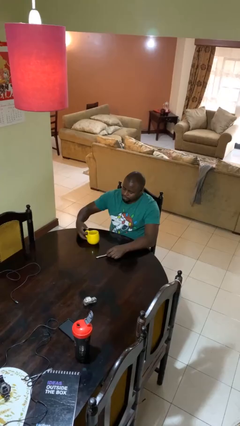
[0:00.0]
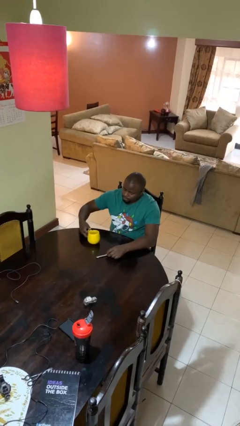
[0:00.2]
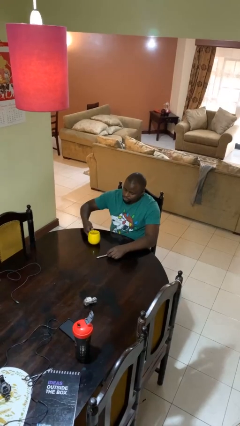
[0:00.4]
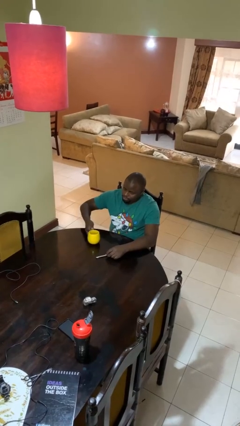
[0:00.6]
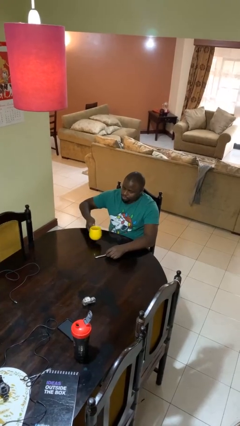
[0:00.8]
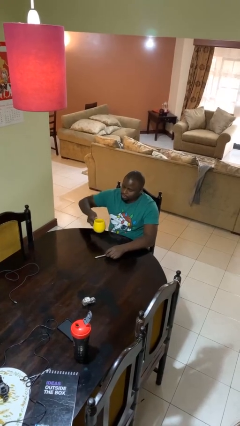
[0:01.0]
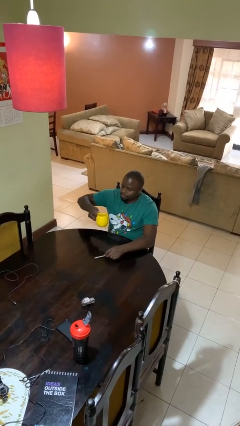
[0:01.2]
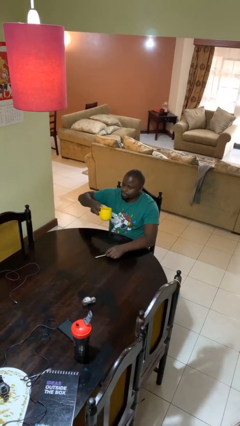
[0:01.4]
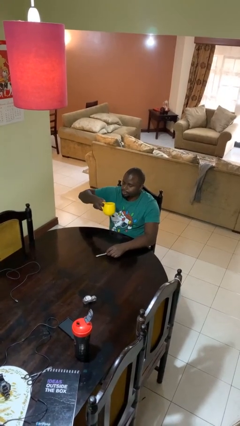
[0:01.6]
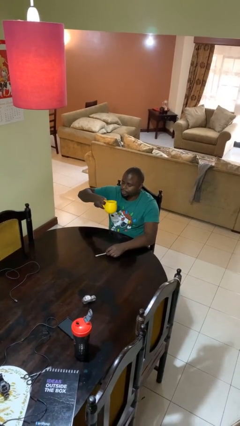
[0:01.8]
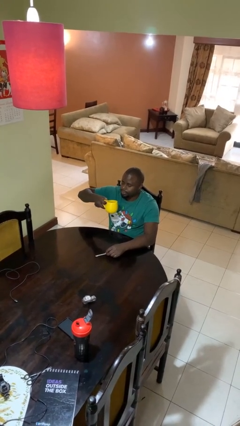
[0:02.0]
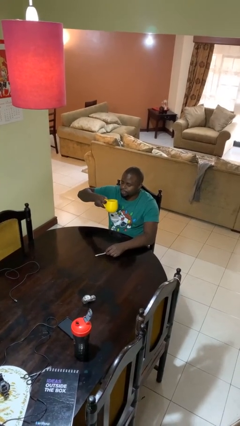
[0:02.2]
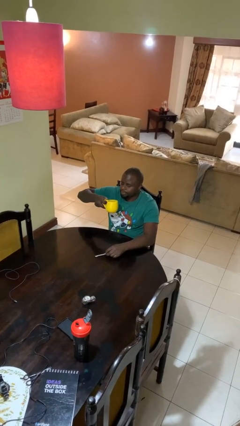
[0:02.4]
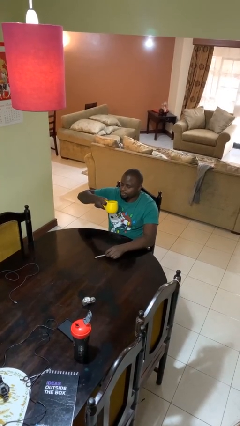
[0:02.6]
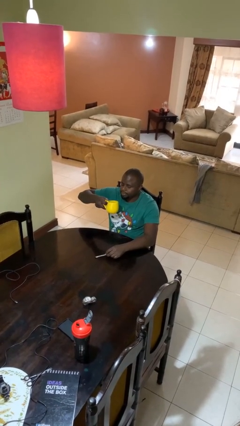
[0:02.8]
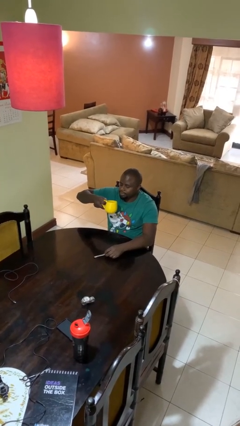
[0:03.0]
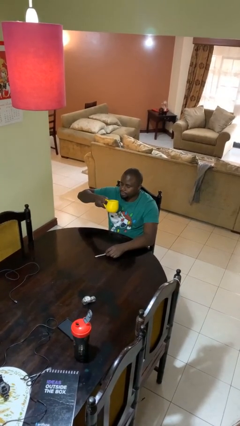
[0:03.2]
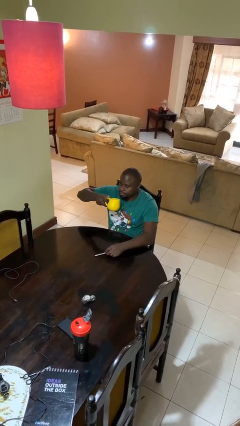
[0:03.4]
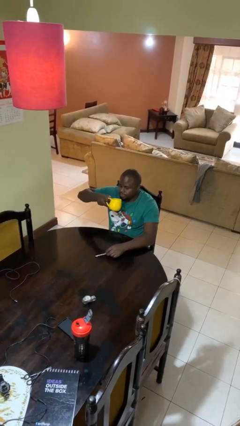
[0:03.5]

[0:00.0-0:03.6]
person picks up object from table

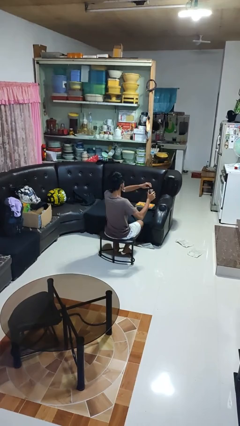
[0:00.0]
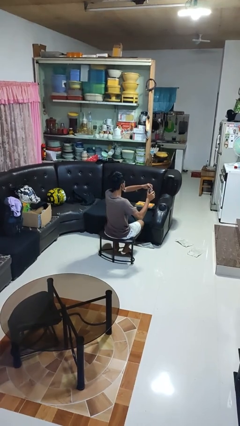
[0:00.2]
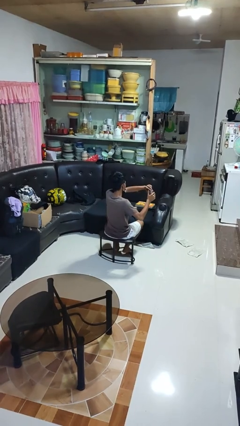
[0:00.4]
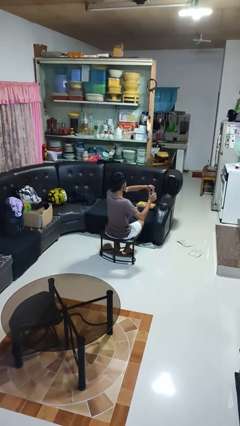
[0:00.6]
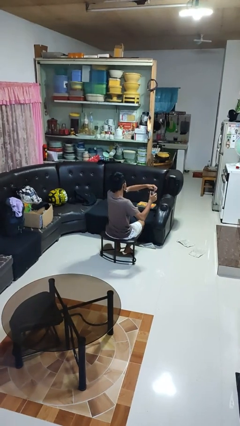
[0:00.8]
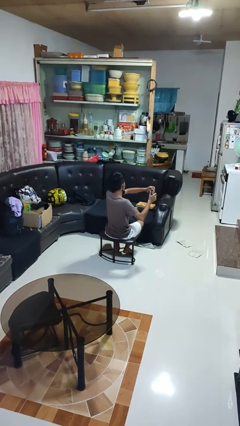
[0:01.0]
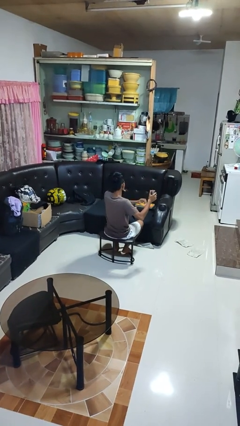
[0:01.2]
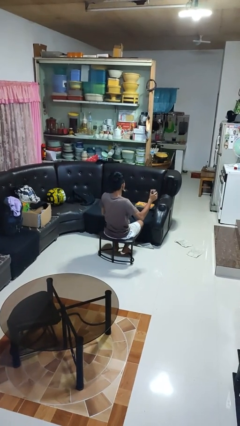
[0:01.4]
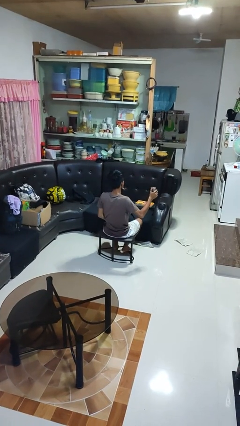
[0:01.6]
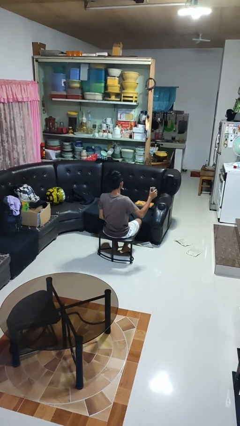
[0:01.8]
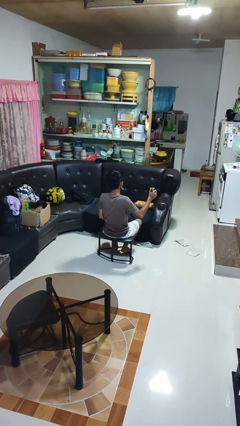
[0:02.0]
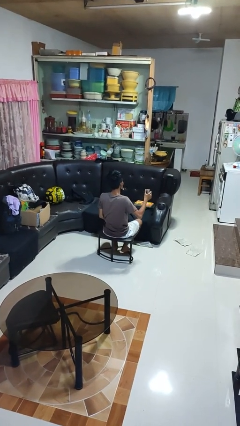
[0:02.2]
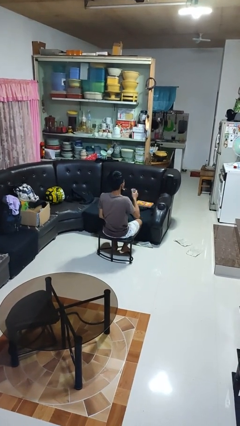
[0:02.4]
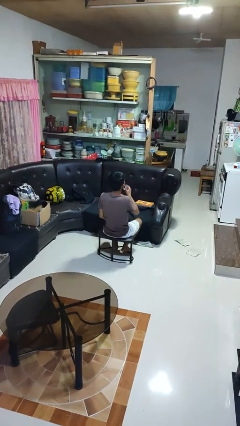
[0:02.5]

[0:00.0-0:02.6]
person opens beverage can

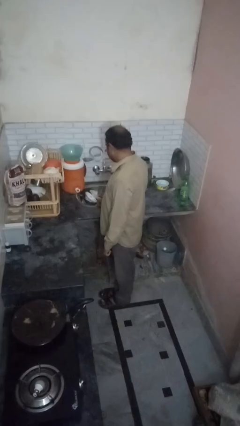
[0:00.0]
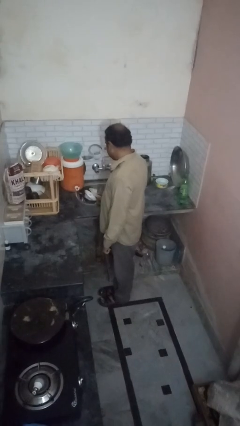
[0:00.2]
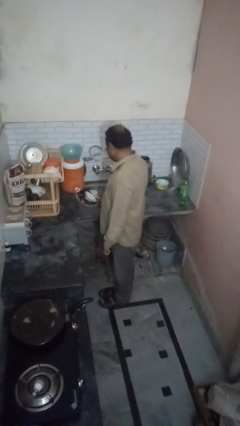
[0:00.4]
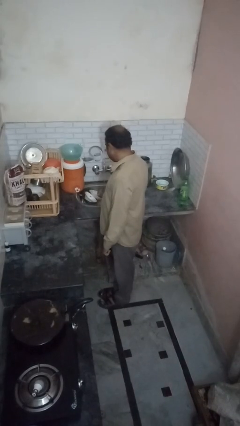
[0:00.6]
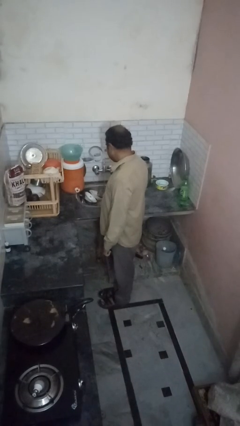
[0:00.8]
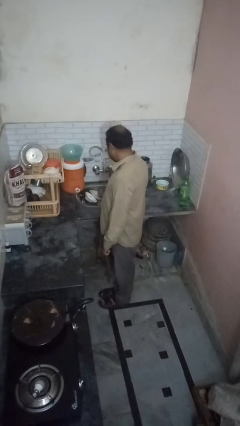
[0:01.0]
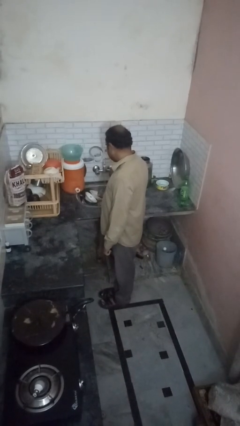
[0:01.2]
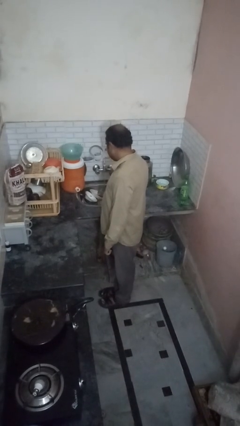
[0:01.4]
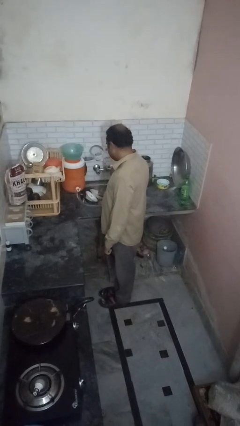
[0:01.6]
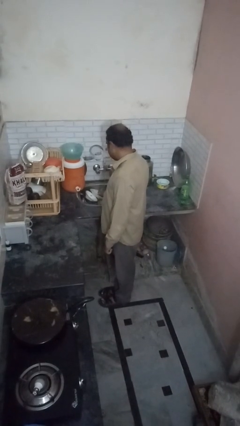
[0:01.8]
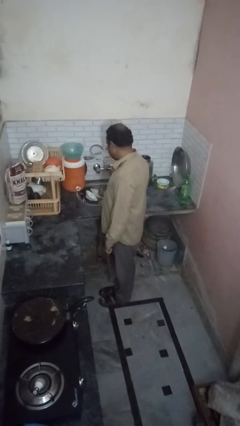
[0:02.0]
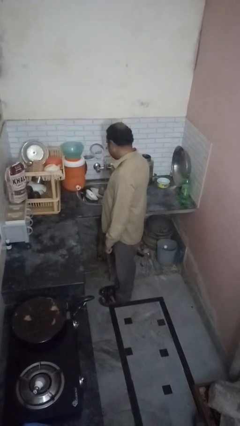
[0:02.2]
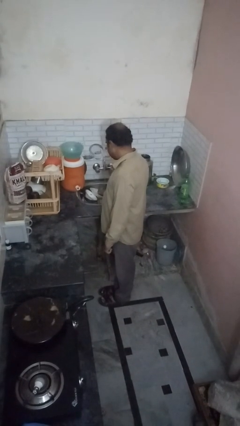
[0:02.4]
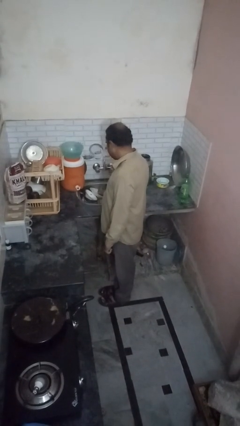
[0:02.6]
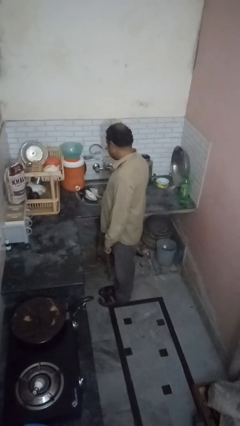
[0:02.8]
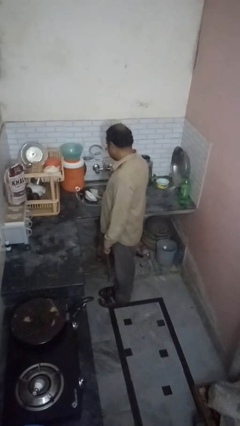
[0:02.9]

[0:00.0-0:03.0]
person closes dishwasher

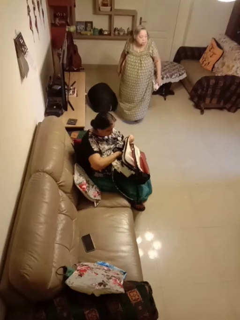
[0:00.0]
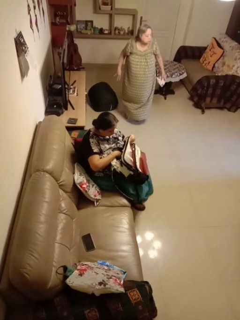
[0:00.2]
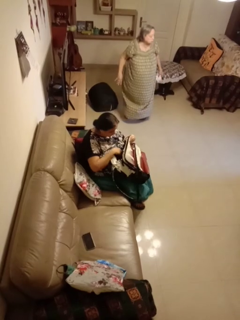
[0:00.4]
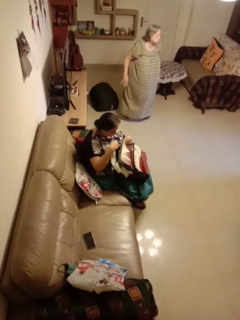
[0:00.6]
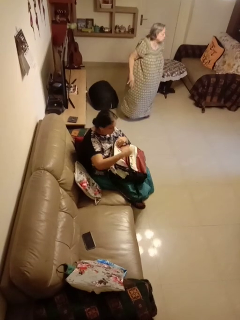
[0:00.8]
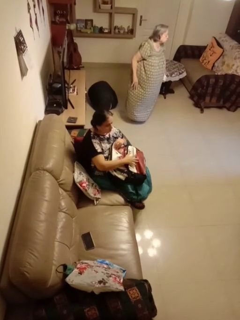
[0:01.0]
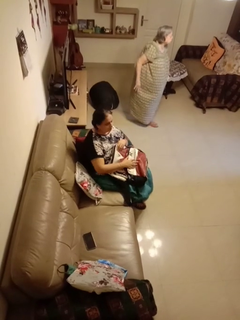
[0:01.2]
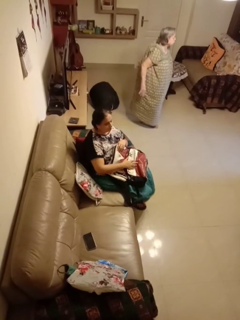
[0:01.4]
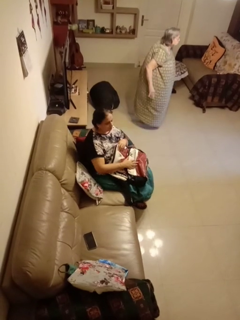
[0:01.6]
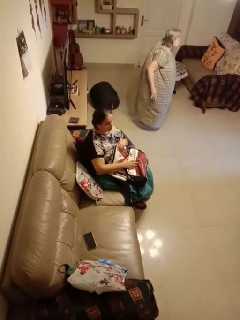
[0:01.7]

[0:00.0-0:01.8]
person puts object into backpack

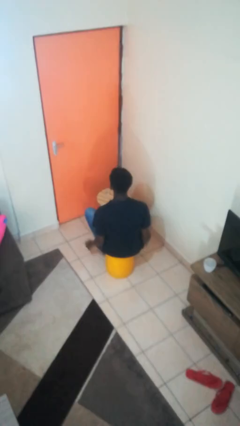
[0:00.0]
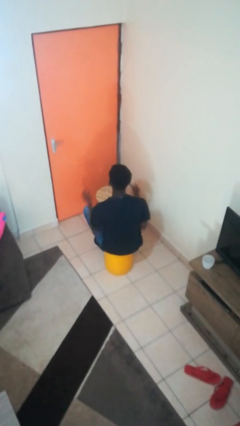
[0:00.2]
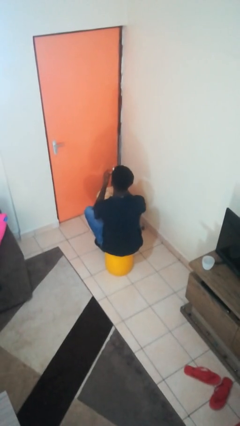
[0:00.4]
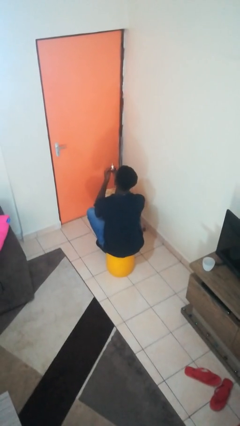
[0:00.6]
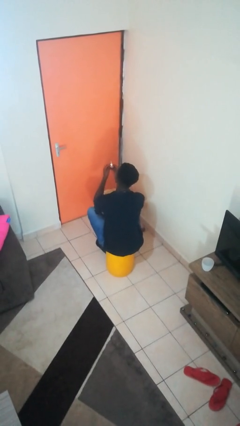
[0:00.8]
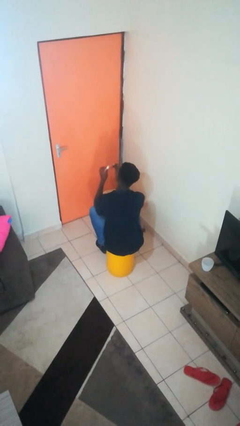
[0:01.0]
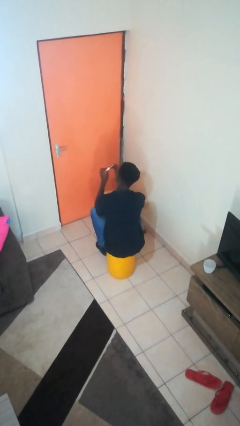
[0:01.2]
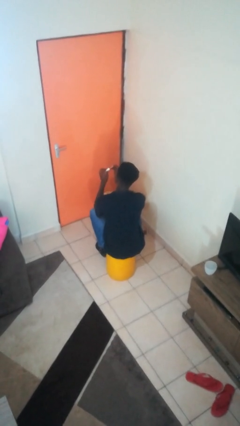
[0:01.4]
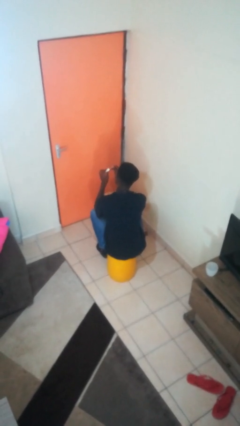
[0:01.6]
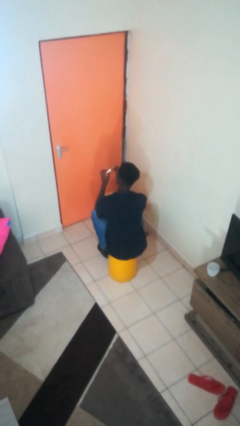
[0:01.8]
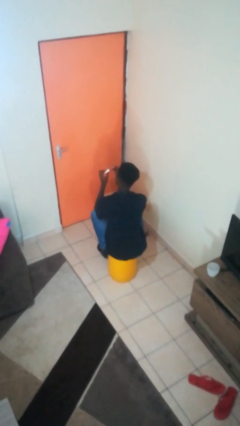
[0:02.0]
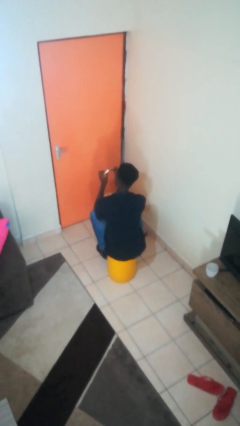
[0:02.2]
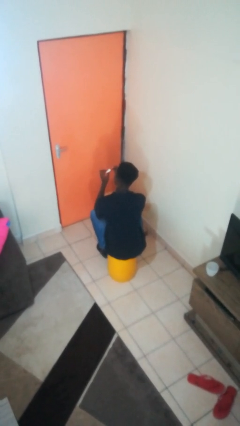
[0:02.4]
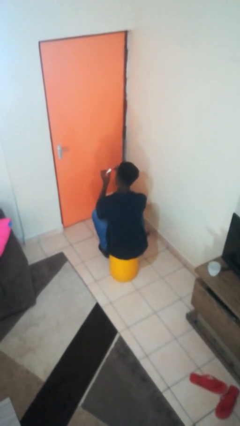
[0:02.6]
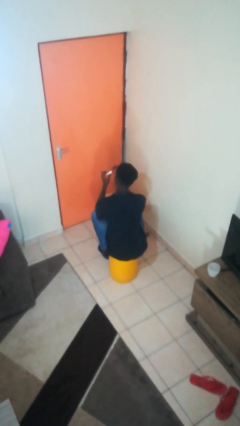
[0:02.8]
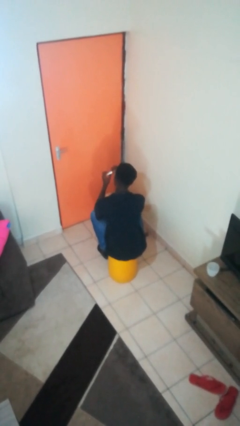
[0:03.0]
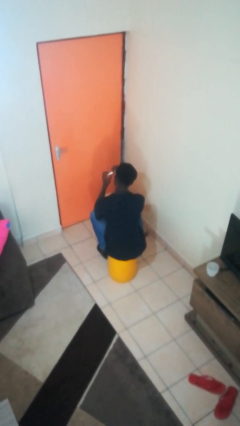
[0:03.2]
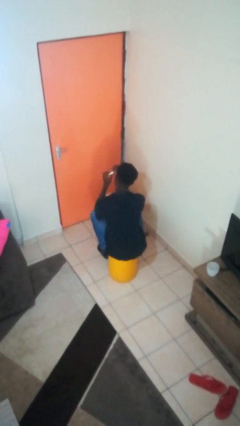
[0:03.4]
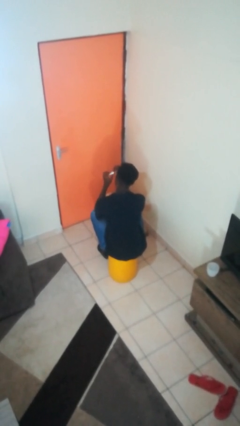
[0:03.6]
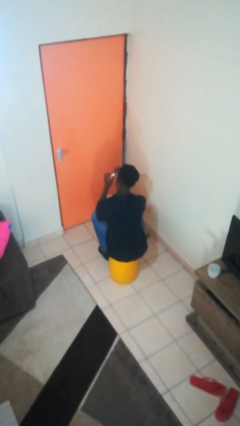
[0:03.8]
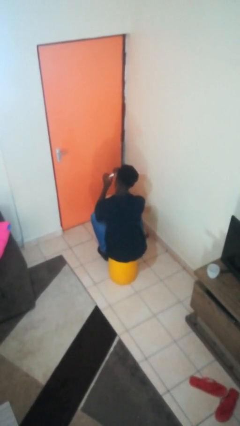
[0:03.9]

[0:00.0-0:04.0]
person paints fingernails

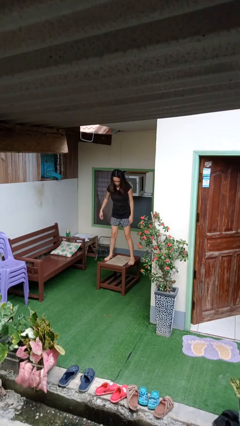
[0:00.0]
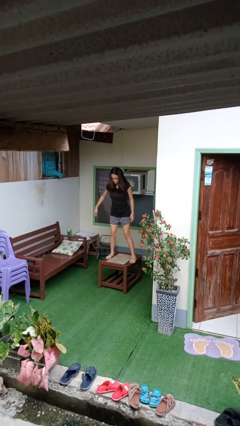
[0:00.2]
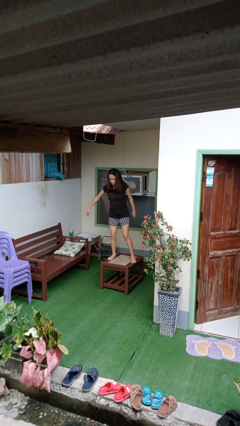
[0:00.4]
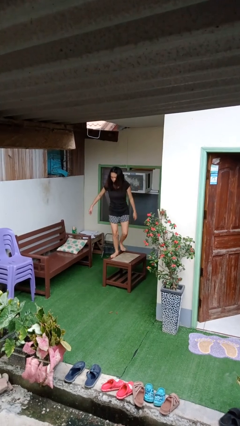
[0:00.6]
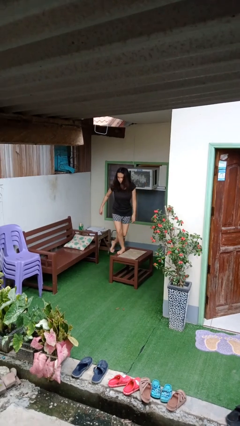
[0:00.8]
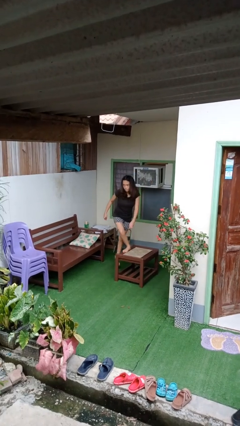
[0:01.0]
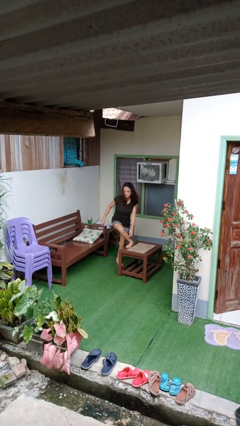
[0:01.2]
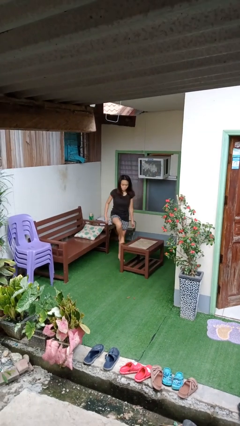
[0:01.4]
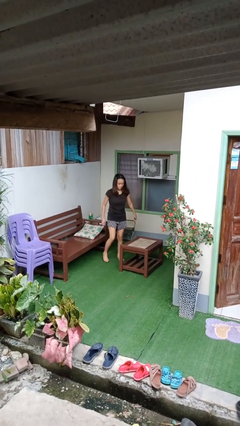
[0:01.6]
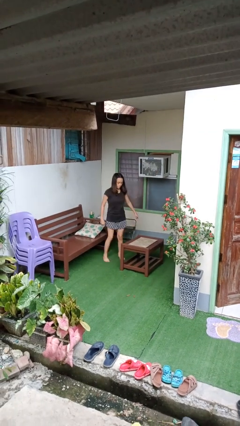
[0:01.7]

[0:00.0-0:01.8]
person climbs off table

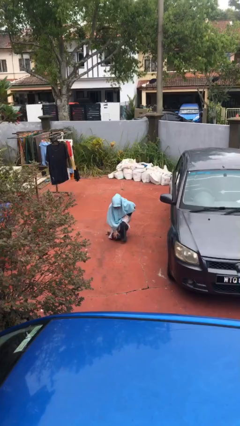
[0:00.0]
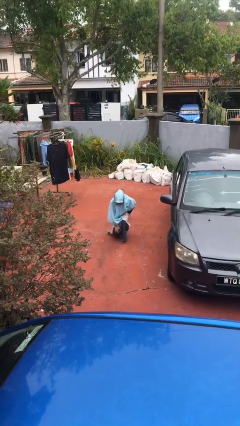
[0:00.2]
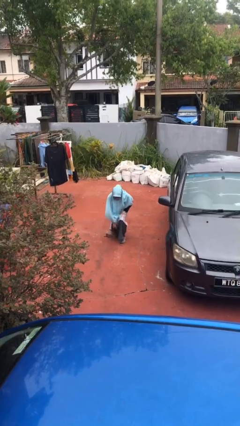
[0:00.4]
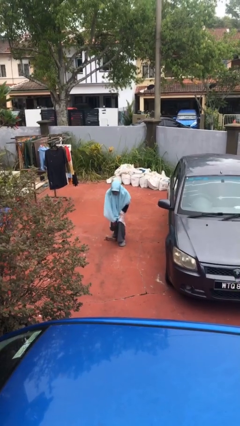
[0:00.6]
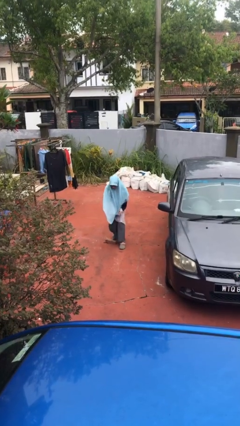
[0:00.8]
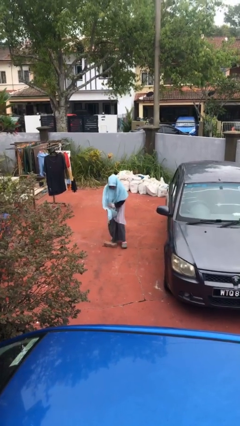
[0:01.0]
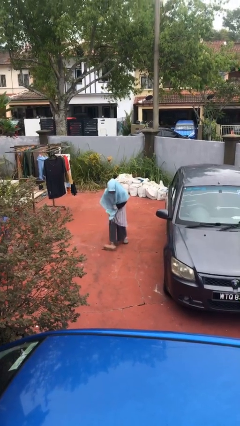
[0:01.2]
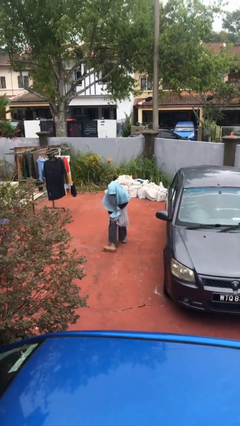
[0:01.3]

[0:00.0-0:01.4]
person stands up from floor
